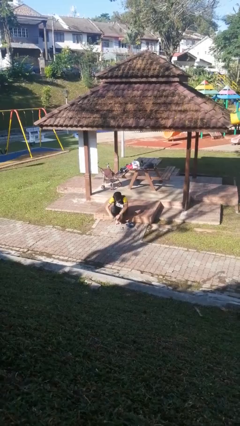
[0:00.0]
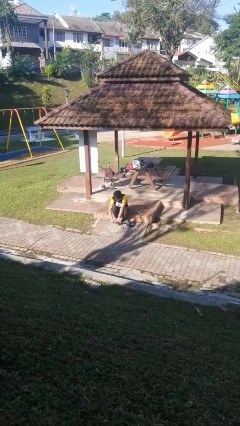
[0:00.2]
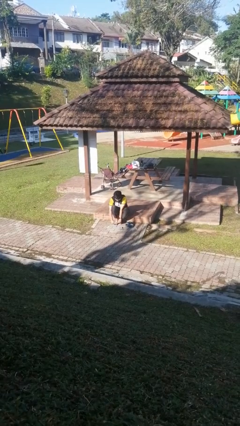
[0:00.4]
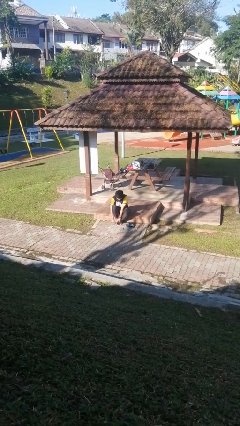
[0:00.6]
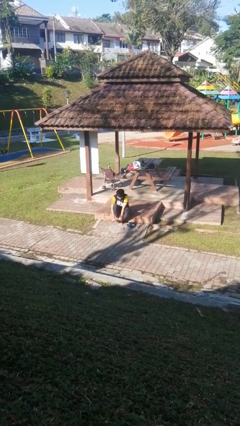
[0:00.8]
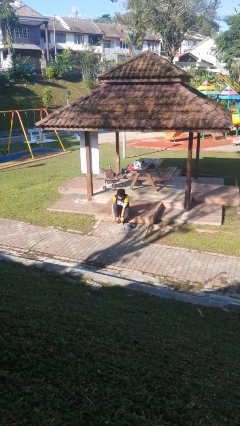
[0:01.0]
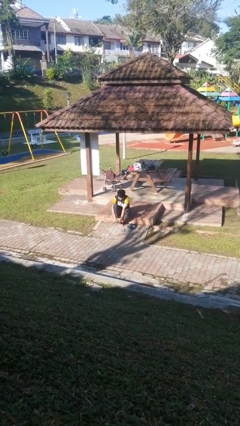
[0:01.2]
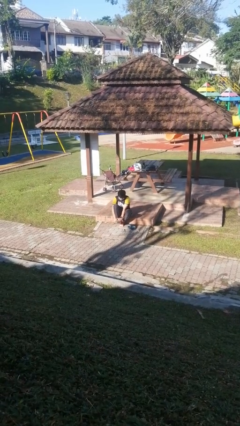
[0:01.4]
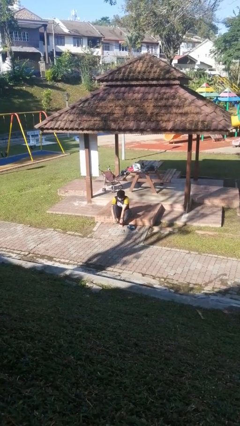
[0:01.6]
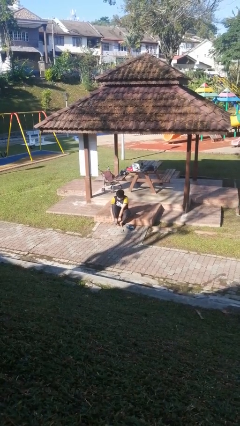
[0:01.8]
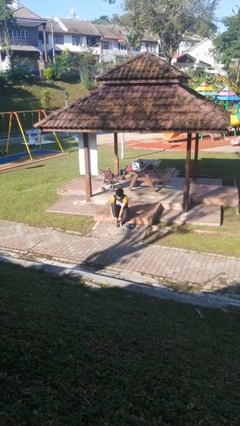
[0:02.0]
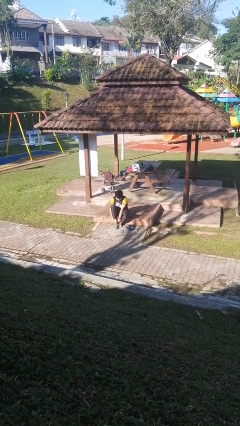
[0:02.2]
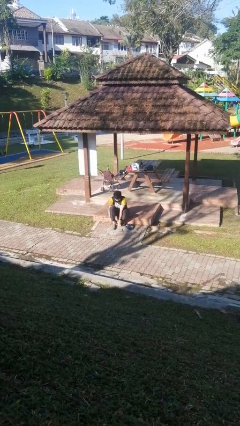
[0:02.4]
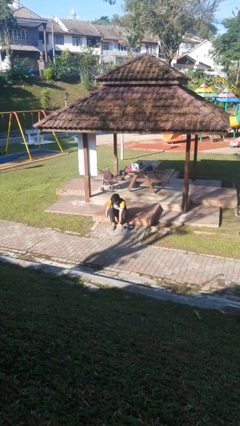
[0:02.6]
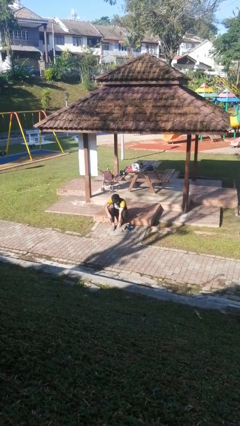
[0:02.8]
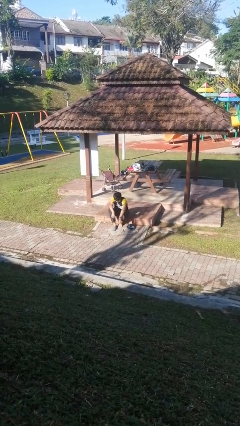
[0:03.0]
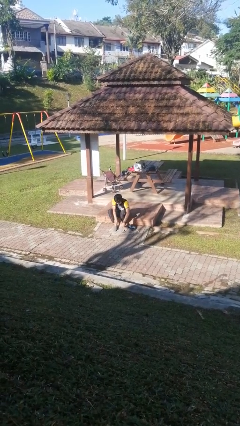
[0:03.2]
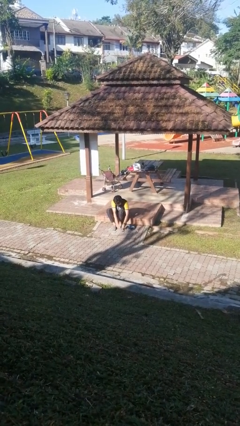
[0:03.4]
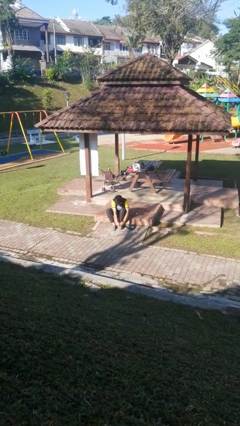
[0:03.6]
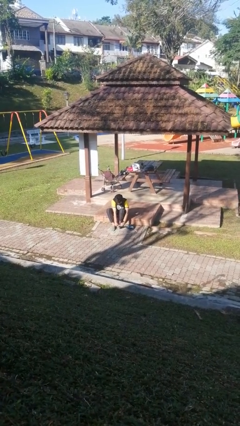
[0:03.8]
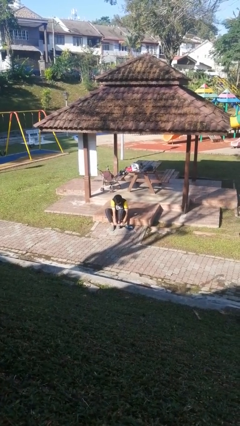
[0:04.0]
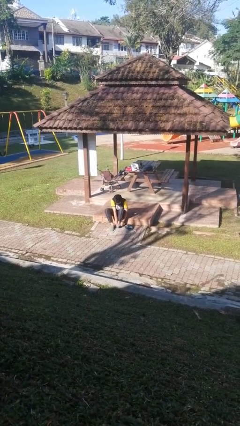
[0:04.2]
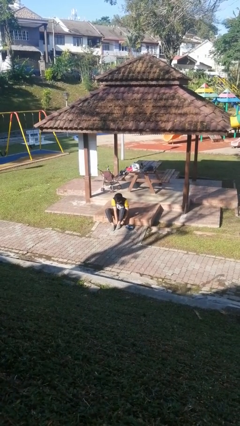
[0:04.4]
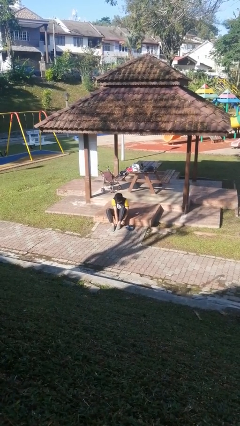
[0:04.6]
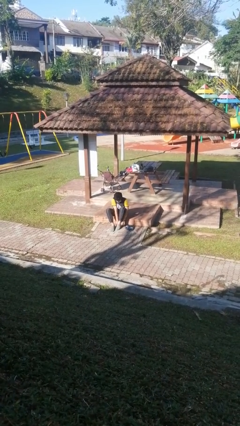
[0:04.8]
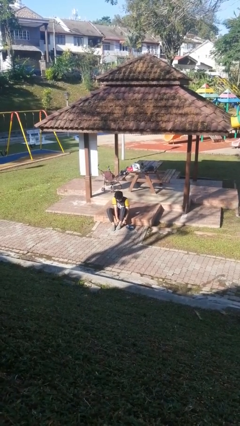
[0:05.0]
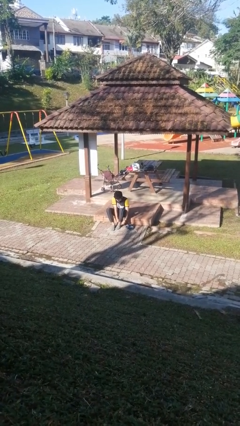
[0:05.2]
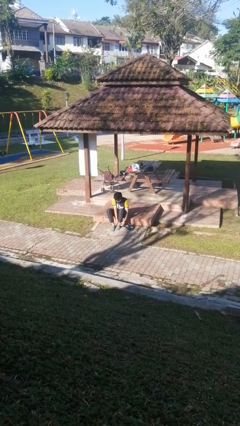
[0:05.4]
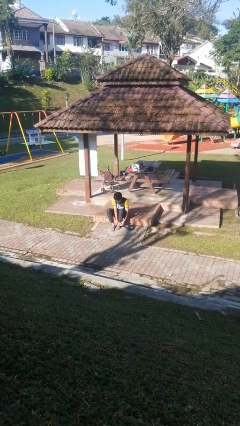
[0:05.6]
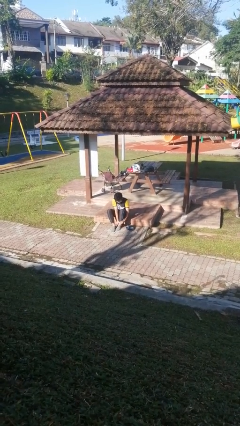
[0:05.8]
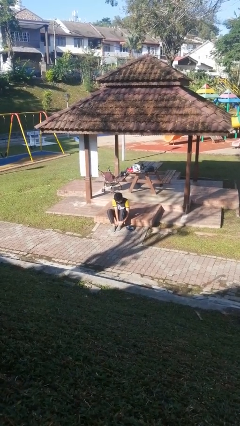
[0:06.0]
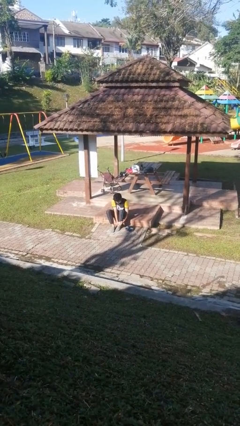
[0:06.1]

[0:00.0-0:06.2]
person puts on socks

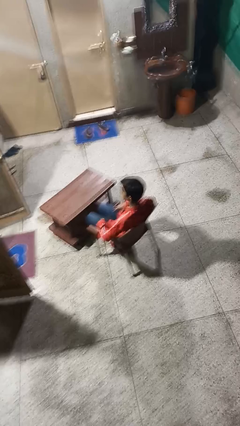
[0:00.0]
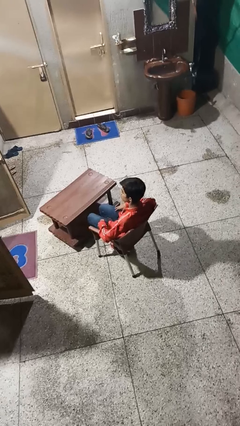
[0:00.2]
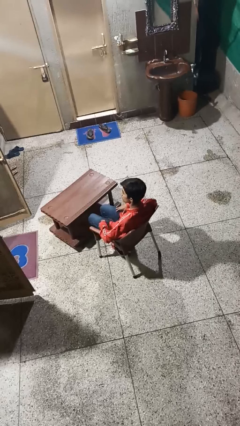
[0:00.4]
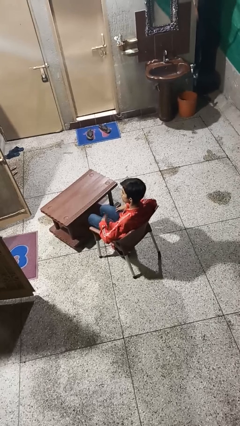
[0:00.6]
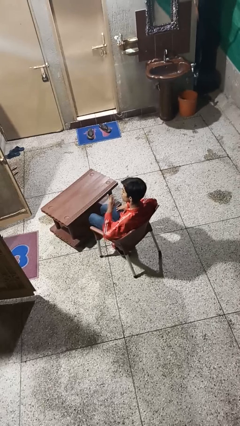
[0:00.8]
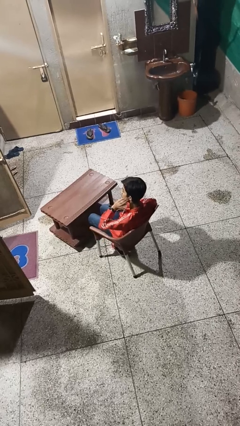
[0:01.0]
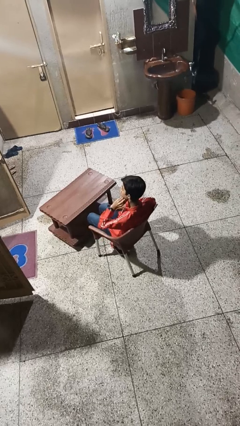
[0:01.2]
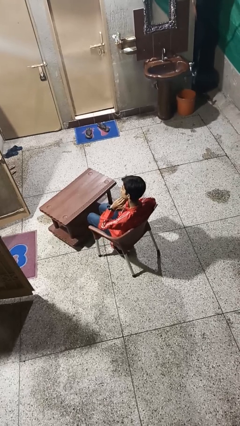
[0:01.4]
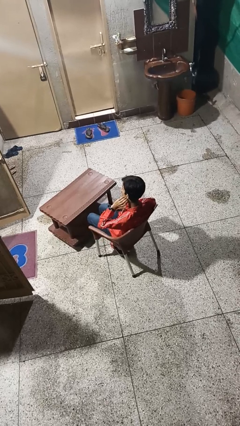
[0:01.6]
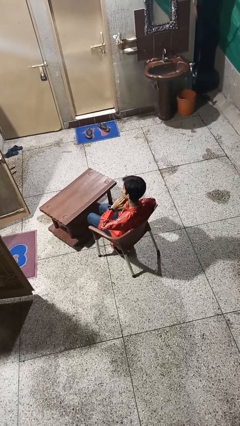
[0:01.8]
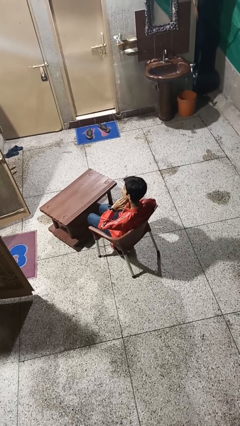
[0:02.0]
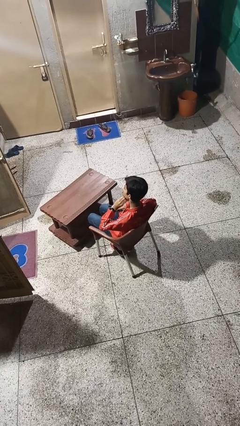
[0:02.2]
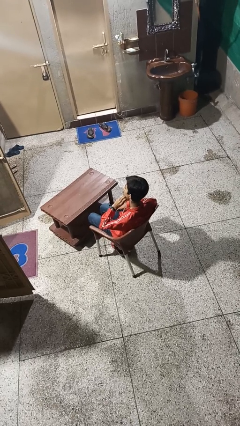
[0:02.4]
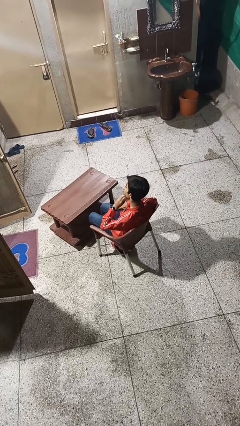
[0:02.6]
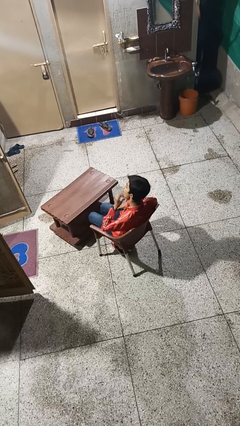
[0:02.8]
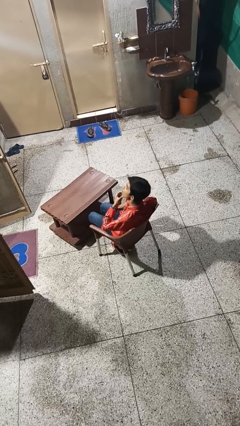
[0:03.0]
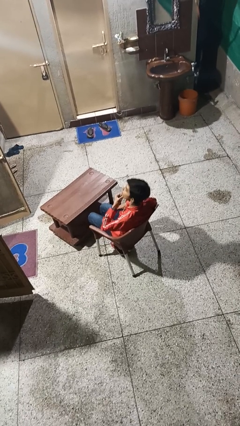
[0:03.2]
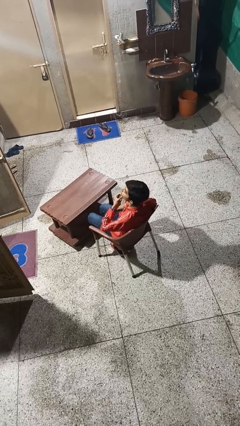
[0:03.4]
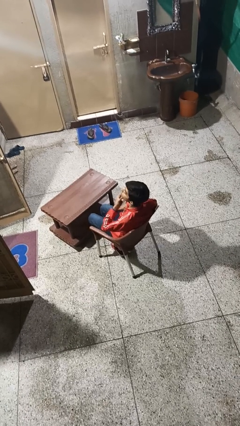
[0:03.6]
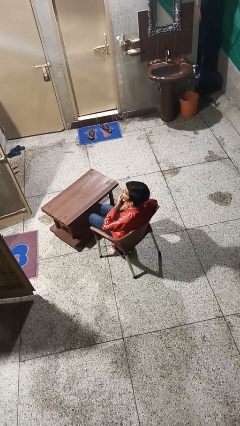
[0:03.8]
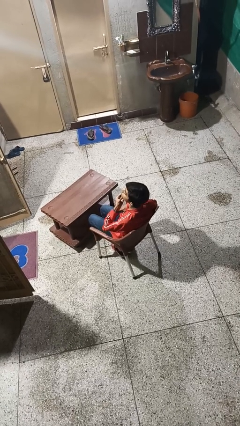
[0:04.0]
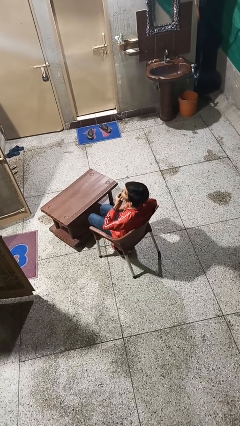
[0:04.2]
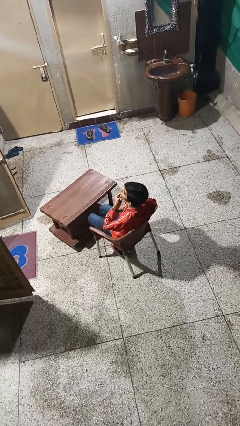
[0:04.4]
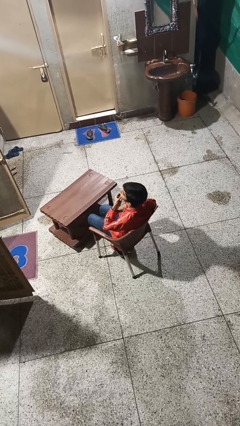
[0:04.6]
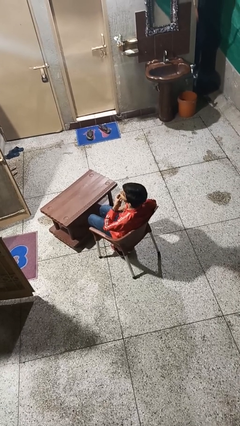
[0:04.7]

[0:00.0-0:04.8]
person strokes chin

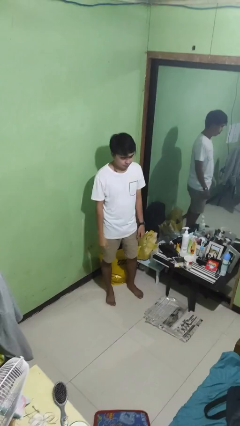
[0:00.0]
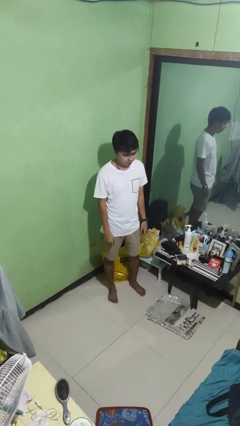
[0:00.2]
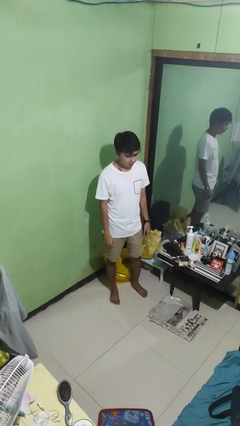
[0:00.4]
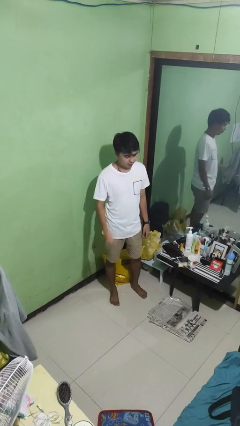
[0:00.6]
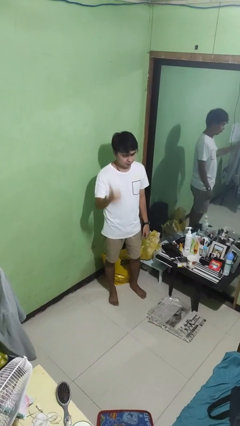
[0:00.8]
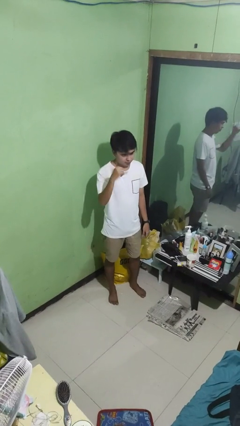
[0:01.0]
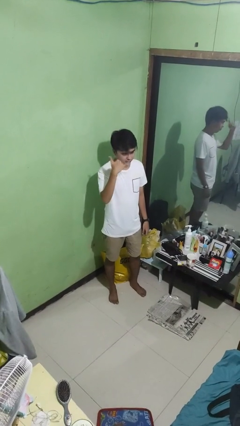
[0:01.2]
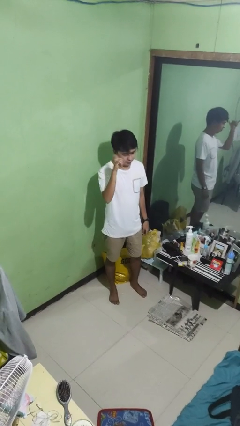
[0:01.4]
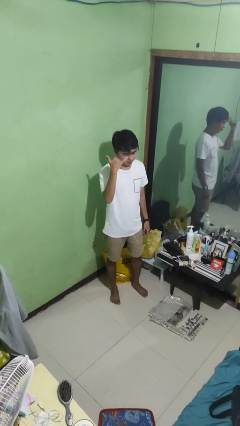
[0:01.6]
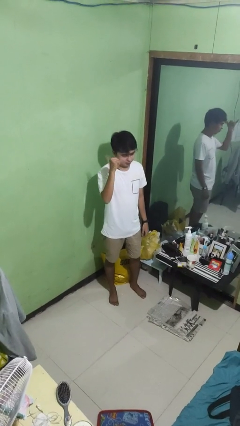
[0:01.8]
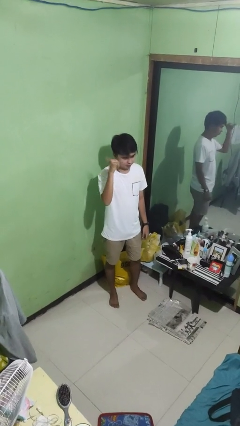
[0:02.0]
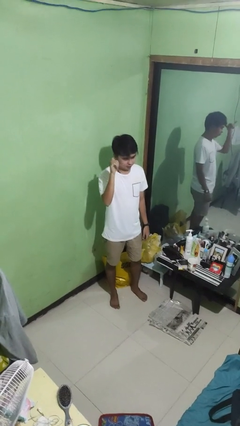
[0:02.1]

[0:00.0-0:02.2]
person gestures hang loose

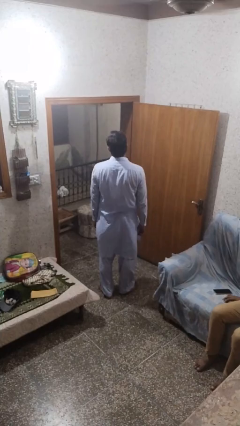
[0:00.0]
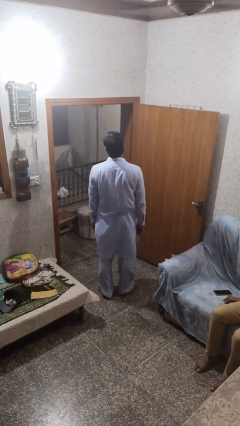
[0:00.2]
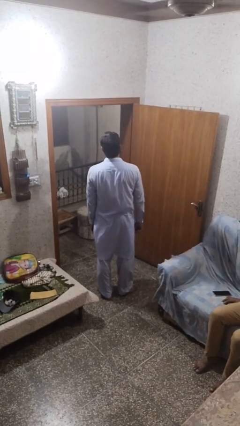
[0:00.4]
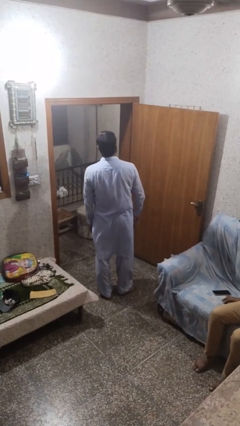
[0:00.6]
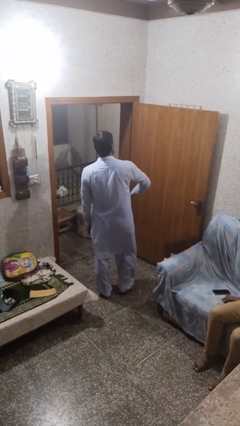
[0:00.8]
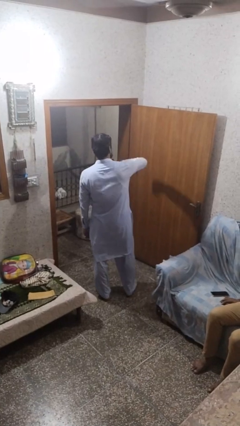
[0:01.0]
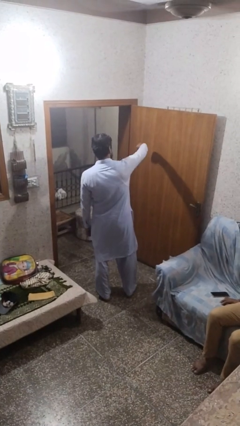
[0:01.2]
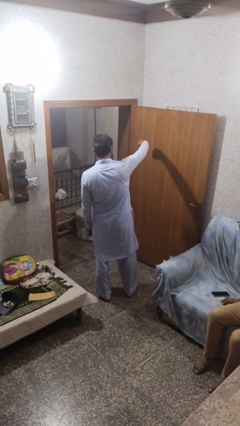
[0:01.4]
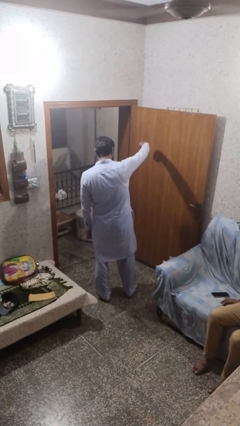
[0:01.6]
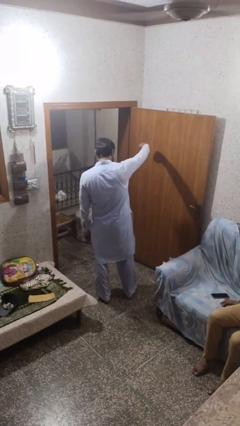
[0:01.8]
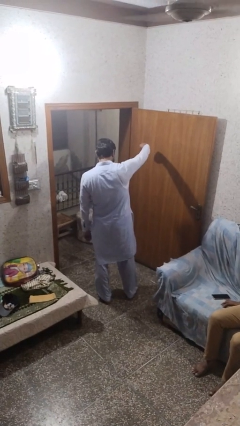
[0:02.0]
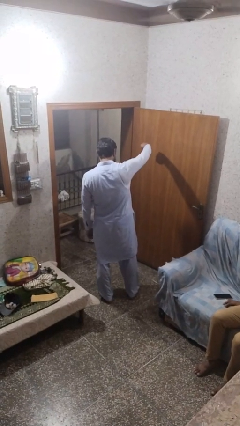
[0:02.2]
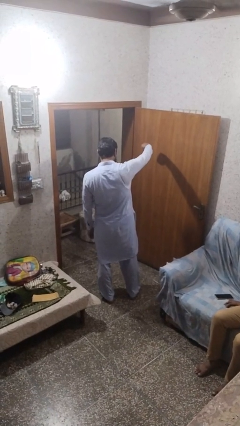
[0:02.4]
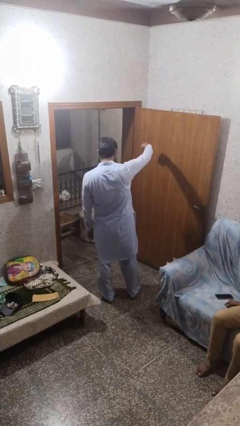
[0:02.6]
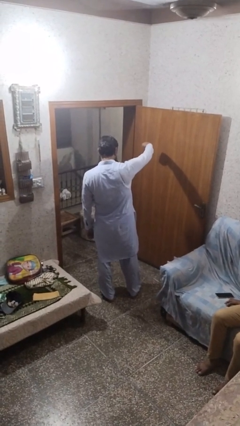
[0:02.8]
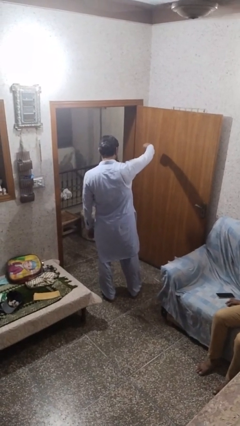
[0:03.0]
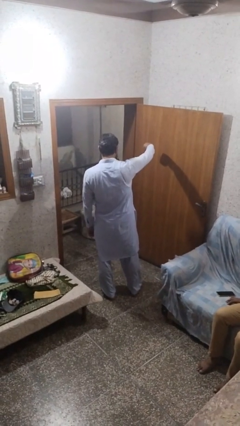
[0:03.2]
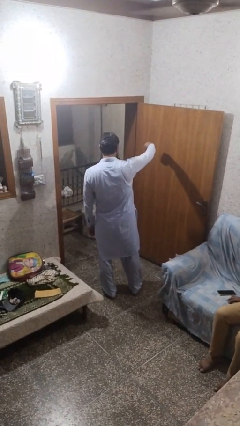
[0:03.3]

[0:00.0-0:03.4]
person karate chop

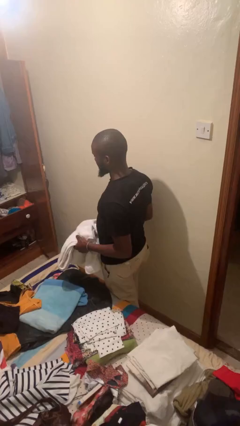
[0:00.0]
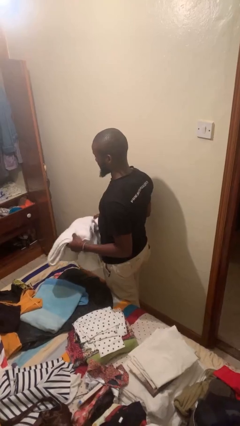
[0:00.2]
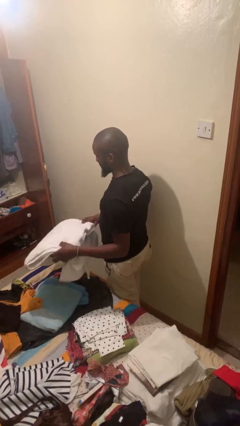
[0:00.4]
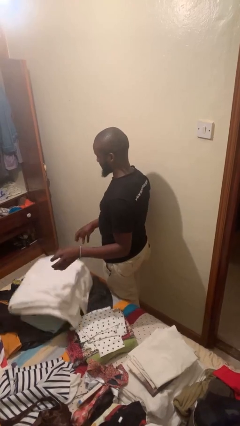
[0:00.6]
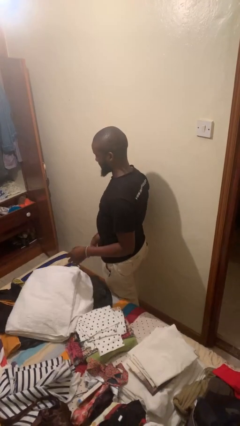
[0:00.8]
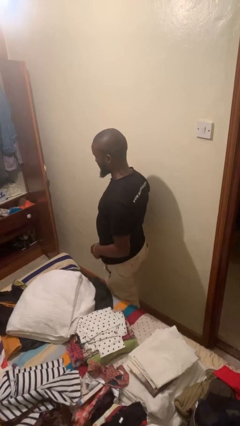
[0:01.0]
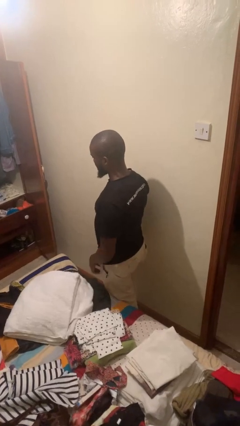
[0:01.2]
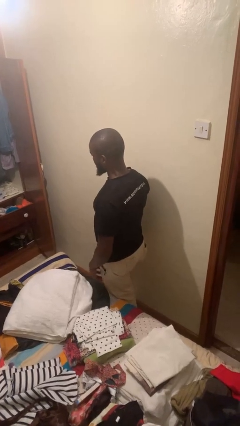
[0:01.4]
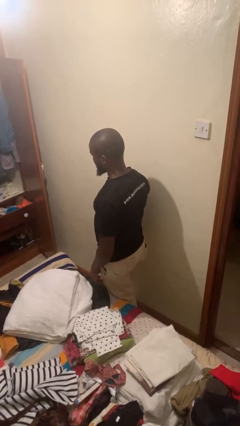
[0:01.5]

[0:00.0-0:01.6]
person throws object on bed
